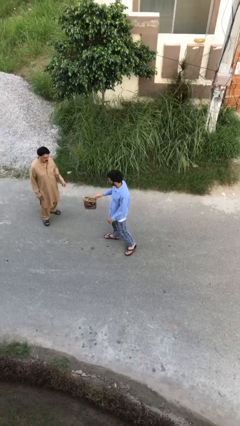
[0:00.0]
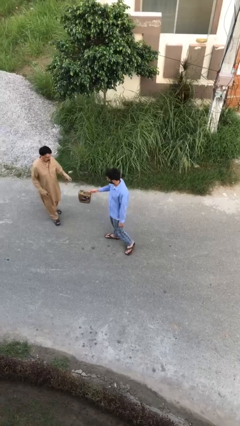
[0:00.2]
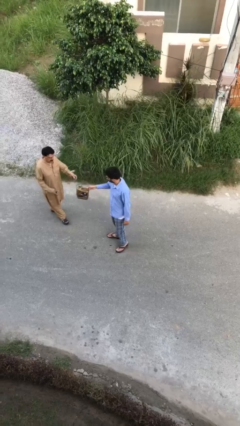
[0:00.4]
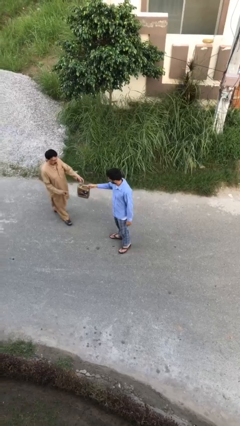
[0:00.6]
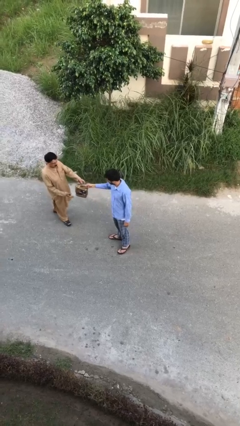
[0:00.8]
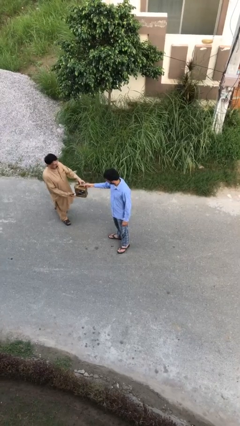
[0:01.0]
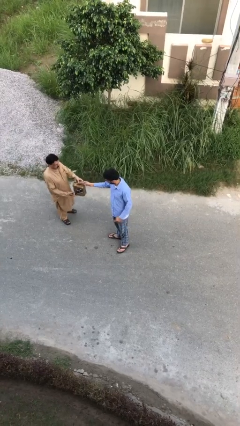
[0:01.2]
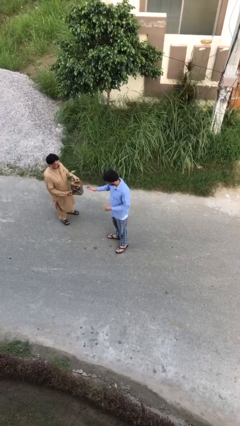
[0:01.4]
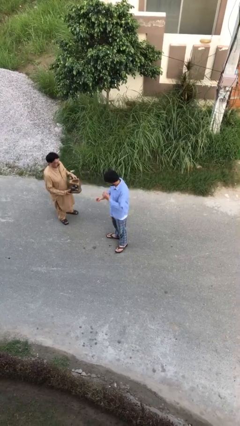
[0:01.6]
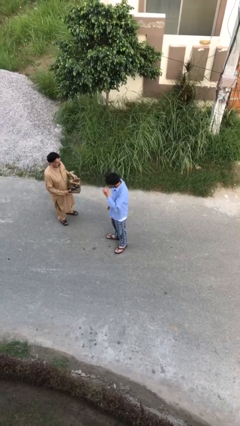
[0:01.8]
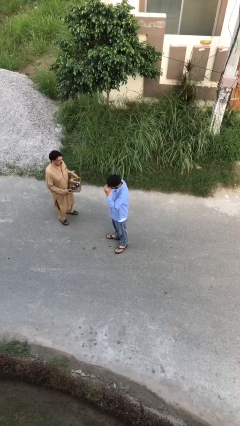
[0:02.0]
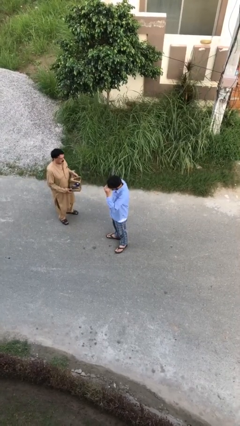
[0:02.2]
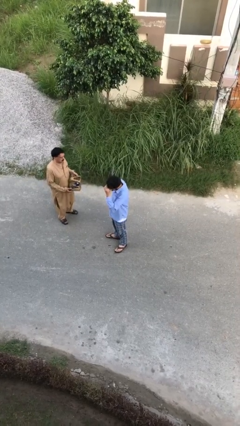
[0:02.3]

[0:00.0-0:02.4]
person transfers object to person

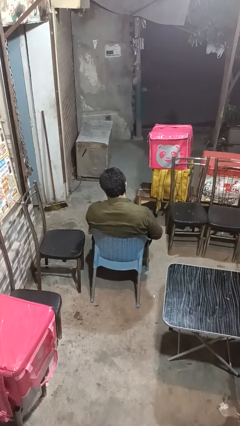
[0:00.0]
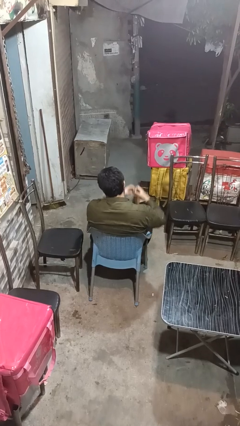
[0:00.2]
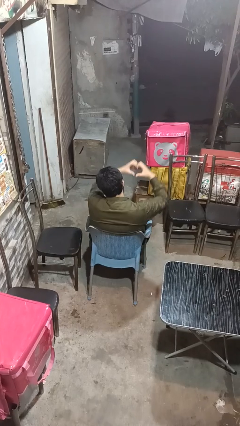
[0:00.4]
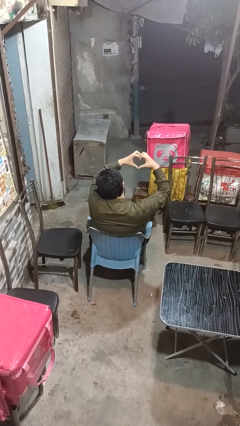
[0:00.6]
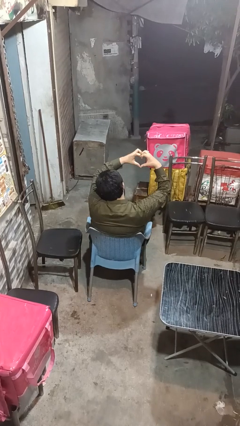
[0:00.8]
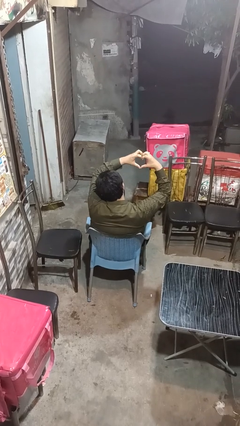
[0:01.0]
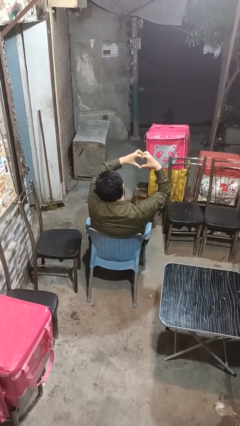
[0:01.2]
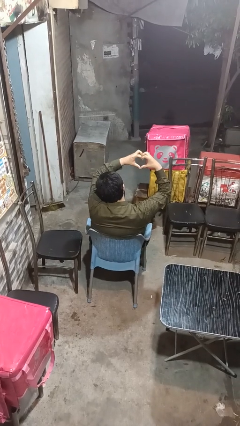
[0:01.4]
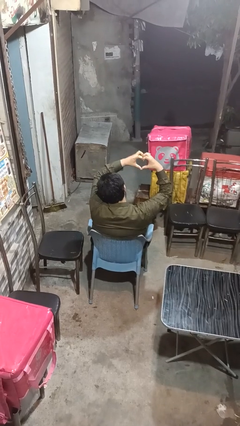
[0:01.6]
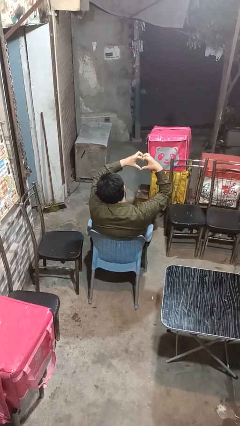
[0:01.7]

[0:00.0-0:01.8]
person gestures heart

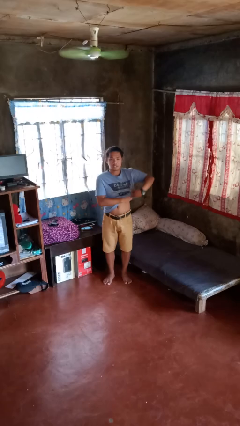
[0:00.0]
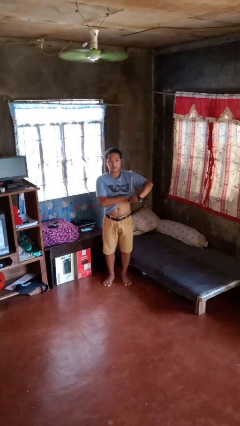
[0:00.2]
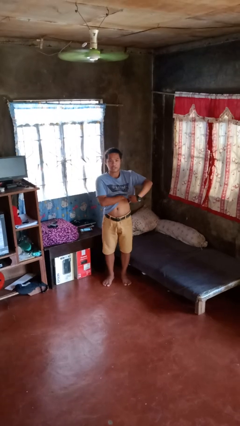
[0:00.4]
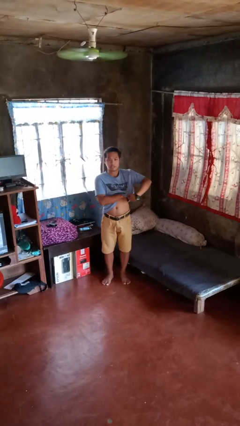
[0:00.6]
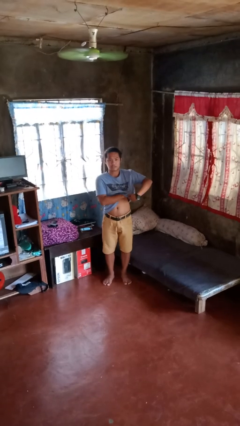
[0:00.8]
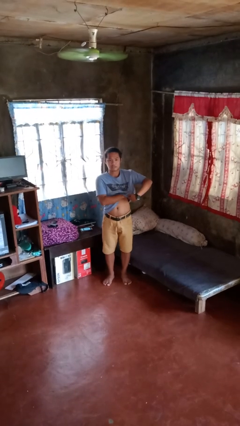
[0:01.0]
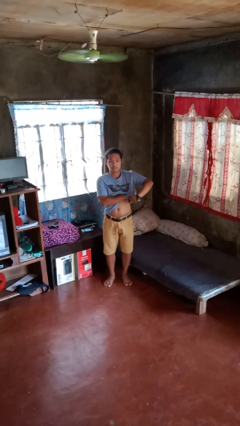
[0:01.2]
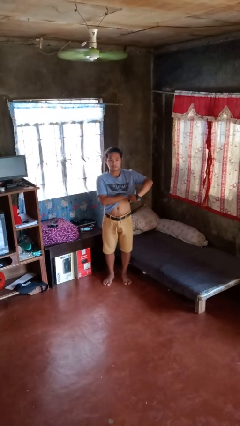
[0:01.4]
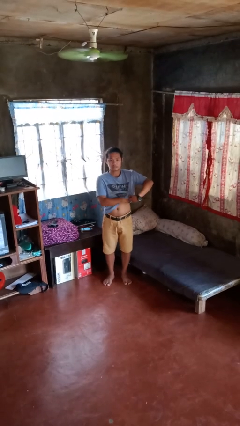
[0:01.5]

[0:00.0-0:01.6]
person applies deodorant

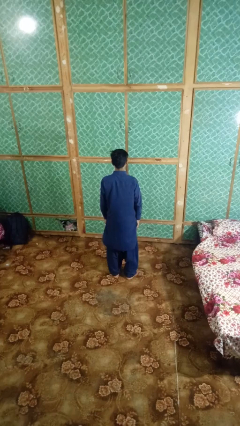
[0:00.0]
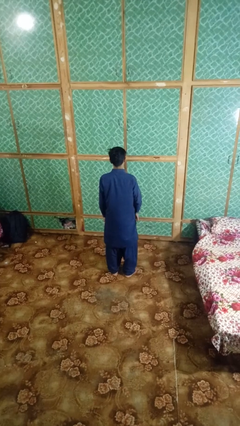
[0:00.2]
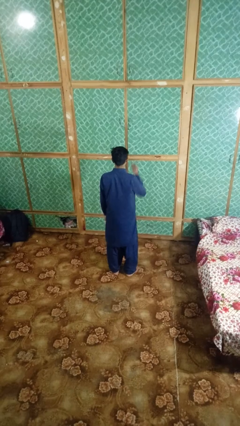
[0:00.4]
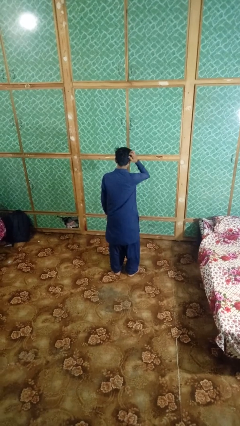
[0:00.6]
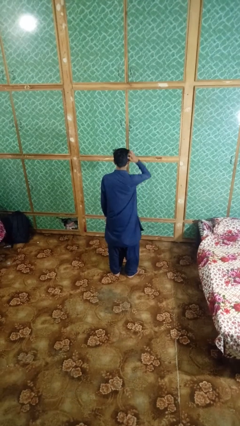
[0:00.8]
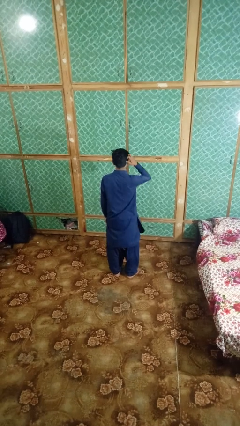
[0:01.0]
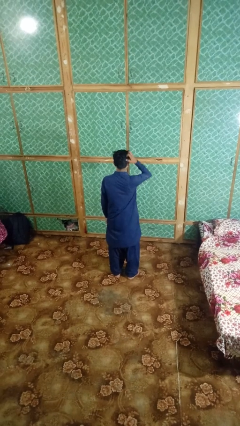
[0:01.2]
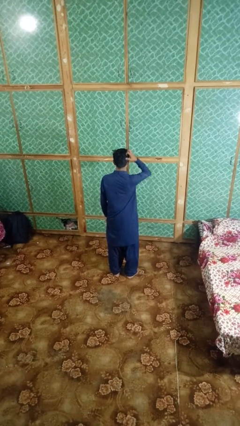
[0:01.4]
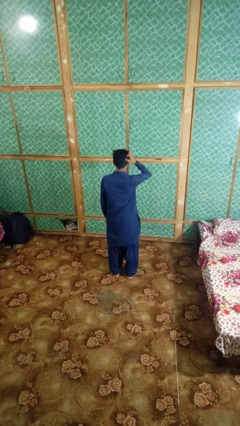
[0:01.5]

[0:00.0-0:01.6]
person strokes hair

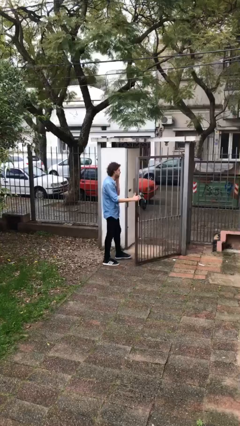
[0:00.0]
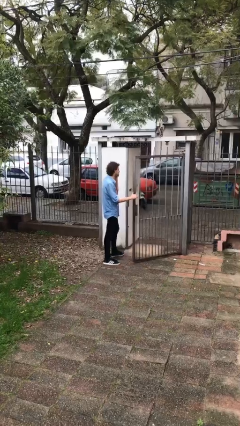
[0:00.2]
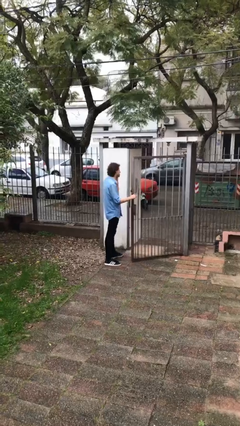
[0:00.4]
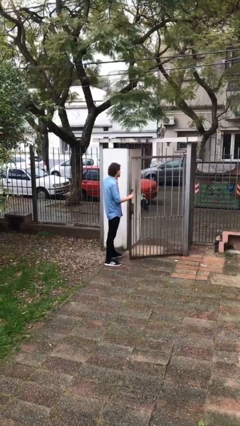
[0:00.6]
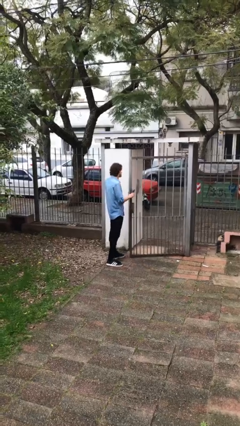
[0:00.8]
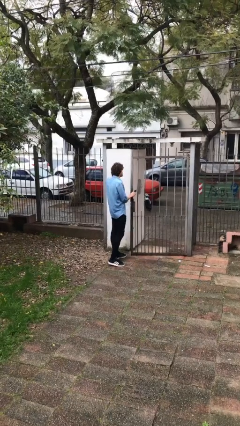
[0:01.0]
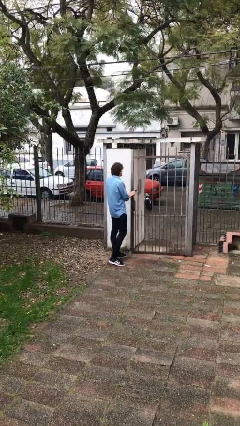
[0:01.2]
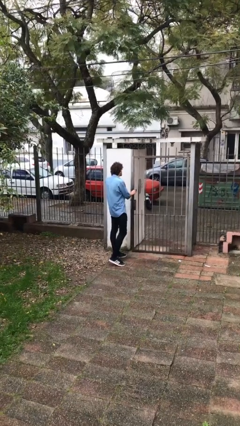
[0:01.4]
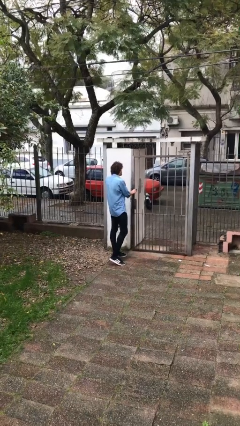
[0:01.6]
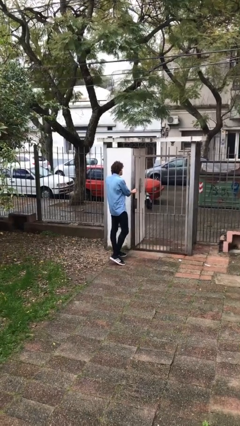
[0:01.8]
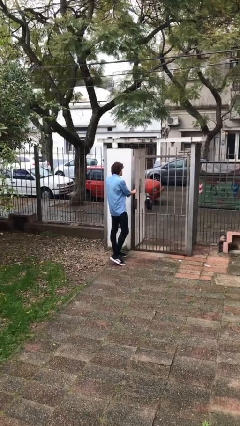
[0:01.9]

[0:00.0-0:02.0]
person closes facility door

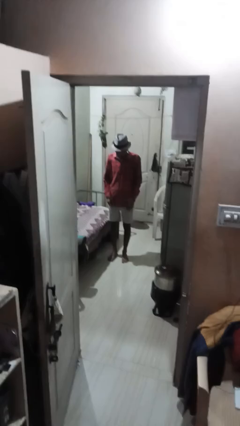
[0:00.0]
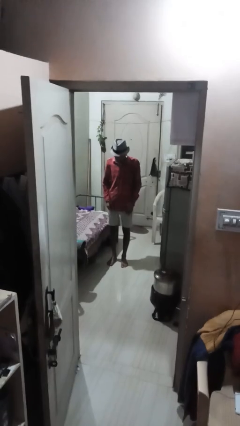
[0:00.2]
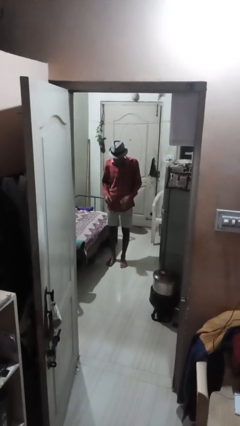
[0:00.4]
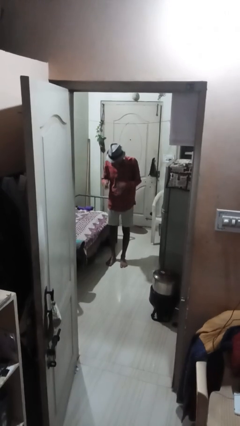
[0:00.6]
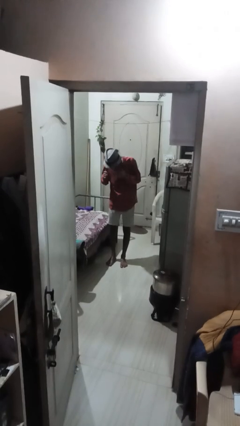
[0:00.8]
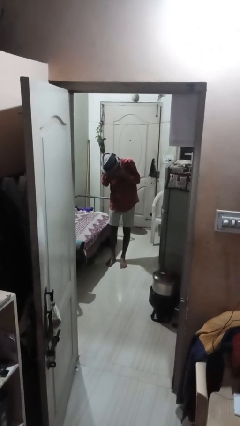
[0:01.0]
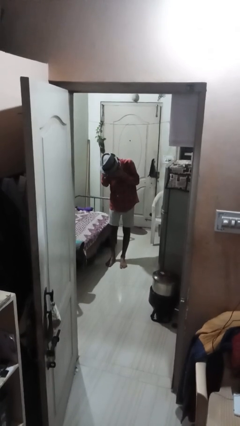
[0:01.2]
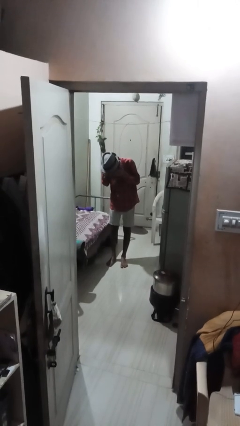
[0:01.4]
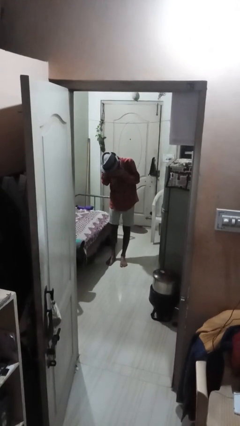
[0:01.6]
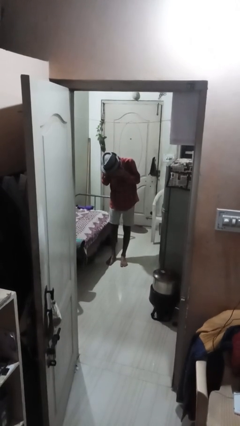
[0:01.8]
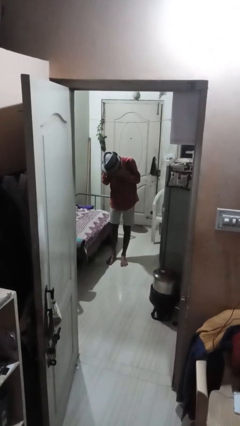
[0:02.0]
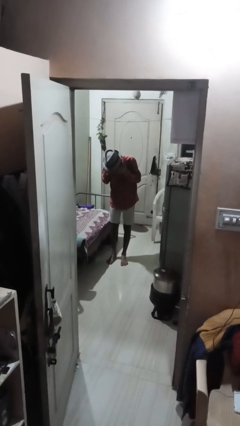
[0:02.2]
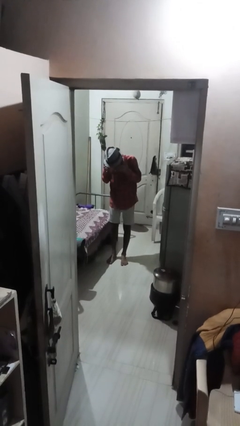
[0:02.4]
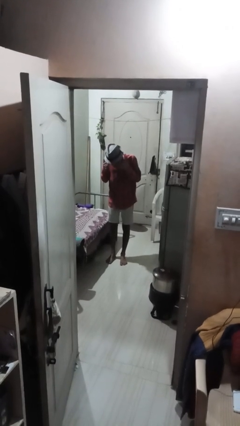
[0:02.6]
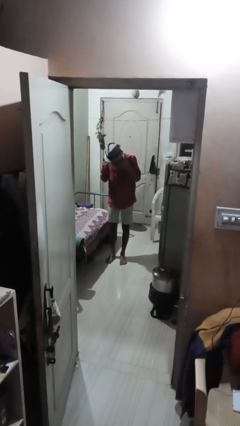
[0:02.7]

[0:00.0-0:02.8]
person rubs eyes

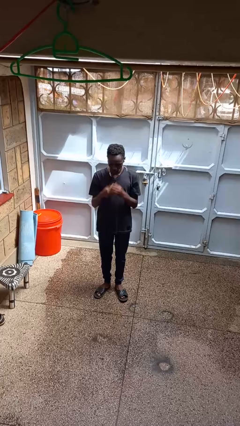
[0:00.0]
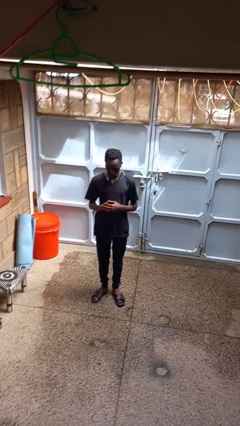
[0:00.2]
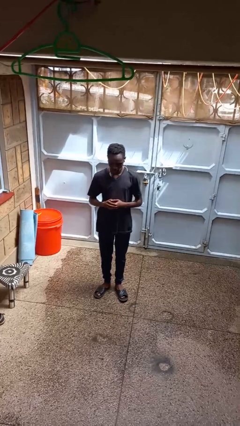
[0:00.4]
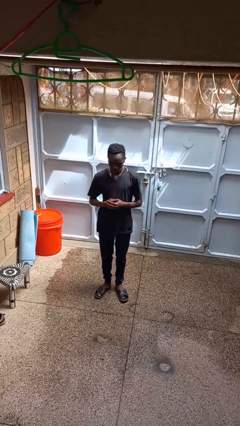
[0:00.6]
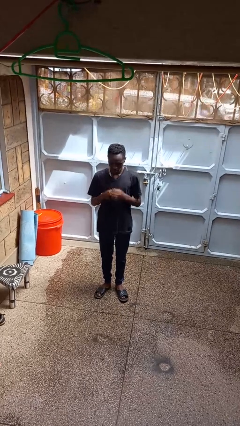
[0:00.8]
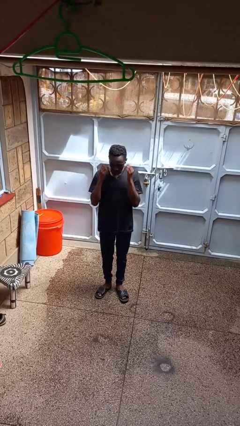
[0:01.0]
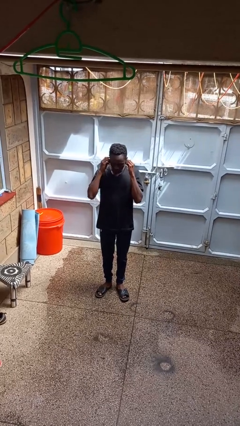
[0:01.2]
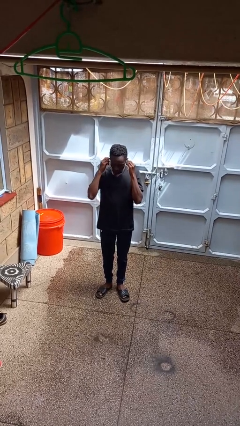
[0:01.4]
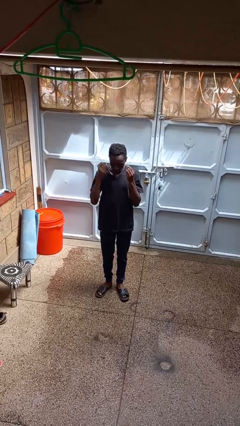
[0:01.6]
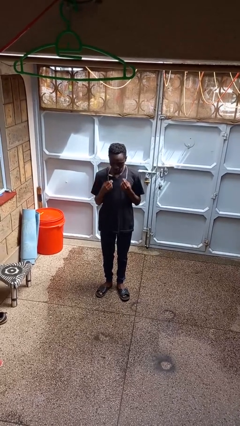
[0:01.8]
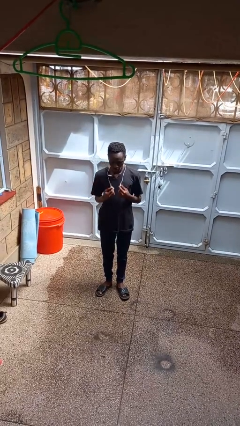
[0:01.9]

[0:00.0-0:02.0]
person takes off headphones

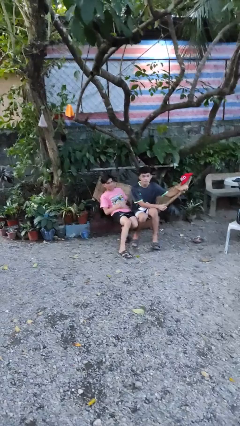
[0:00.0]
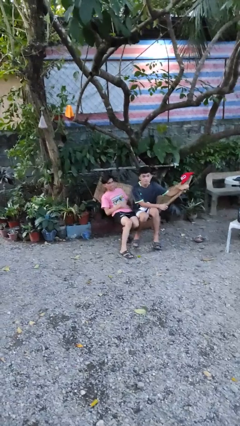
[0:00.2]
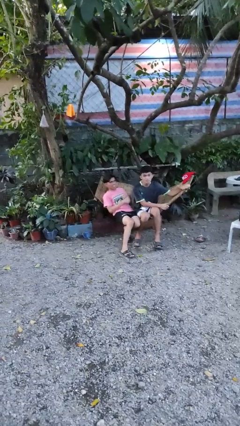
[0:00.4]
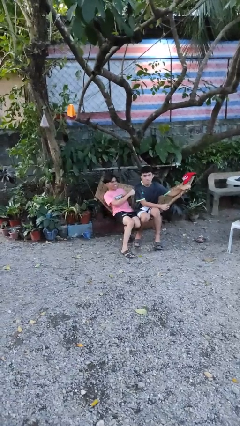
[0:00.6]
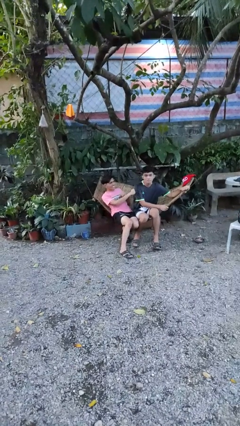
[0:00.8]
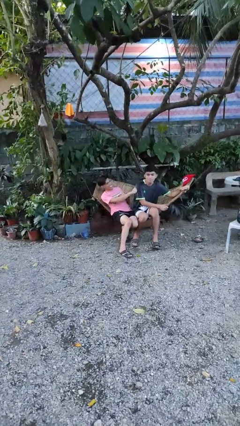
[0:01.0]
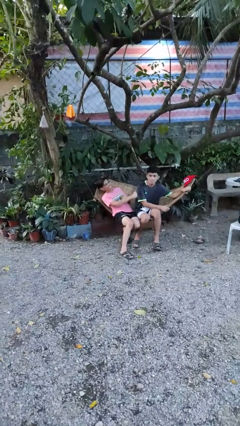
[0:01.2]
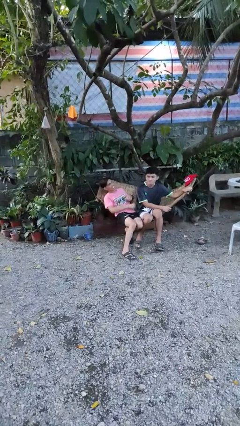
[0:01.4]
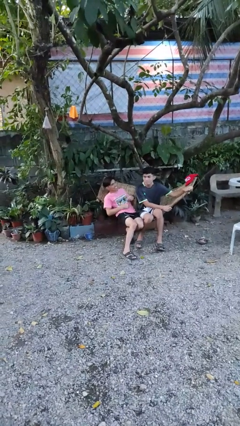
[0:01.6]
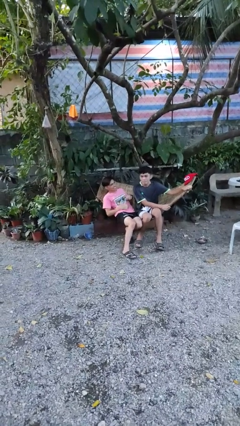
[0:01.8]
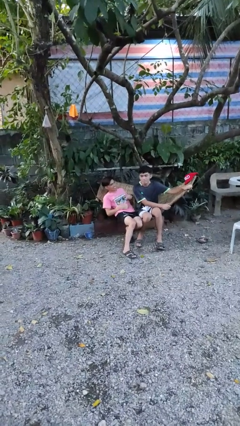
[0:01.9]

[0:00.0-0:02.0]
person pounds shoulders of person

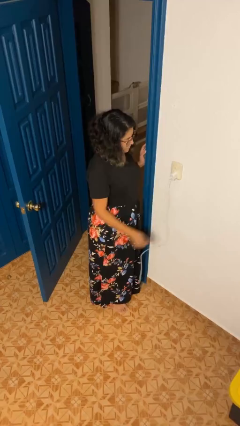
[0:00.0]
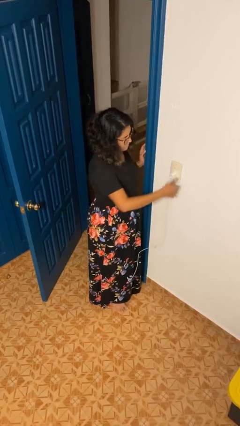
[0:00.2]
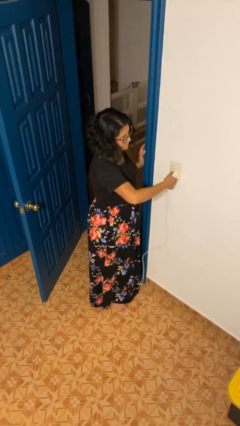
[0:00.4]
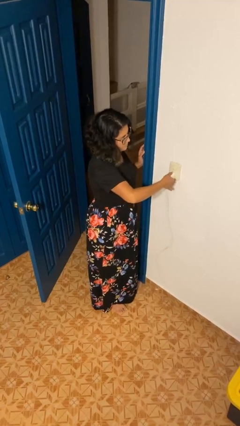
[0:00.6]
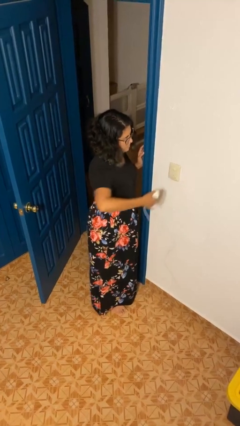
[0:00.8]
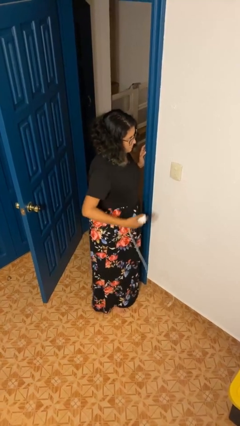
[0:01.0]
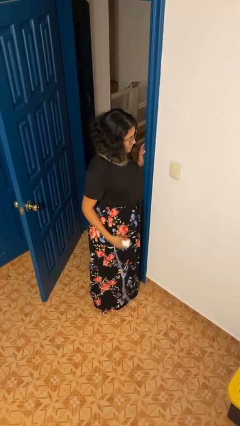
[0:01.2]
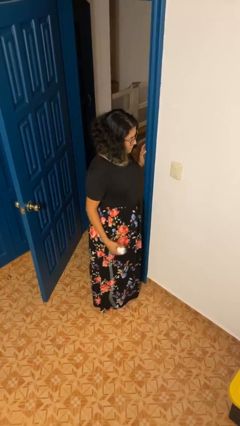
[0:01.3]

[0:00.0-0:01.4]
person unplugs from electrical socket
